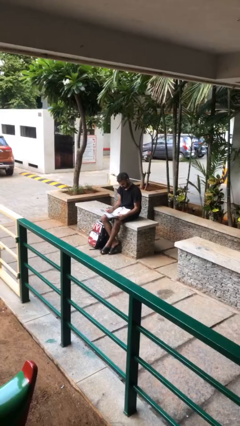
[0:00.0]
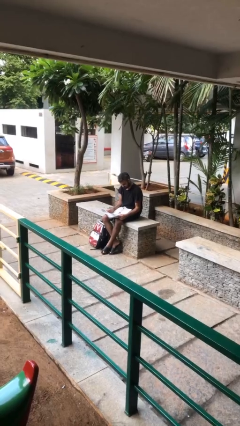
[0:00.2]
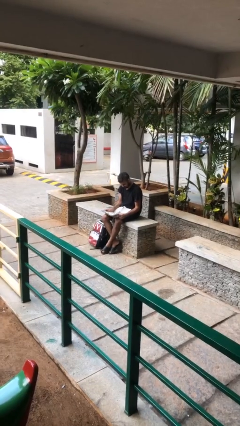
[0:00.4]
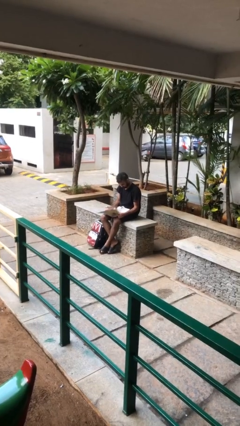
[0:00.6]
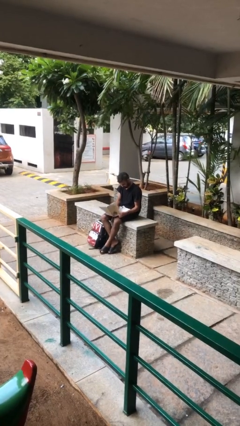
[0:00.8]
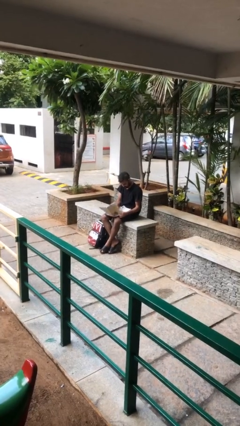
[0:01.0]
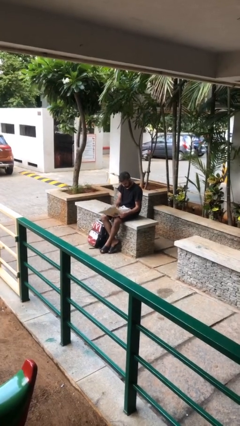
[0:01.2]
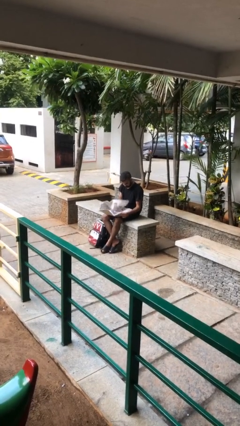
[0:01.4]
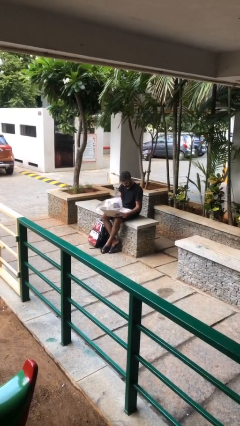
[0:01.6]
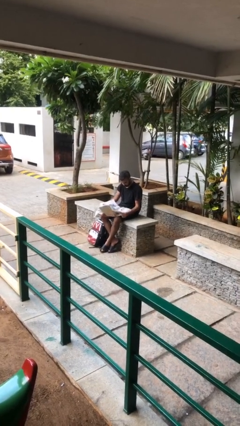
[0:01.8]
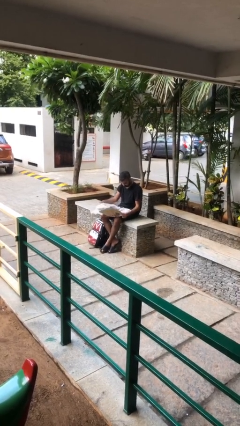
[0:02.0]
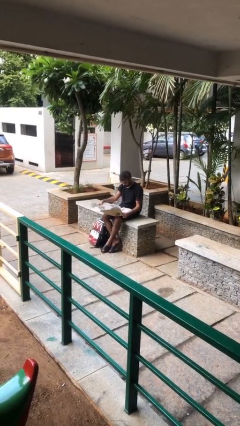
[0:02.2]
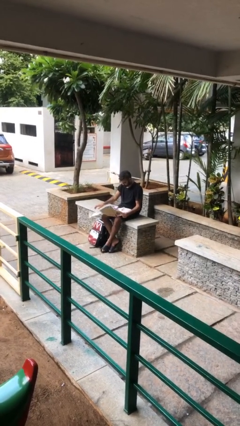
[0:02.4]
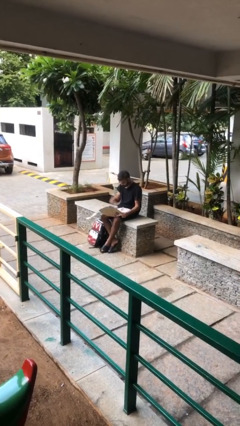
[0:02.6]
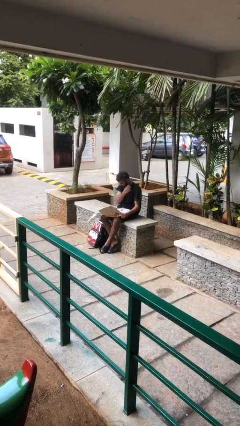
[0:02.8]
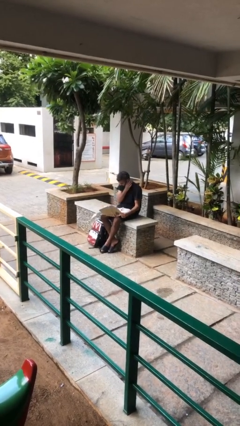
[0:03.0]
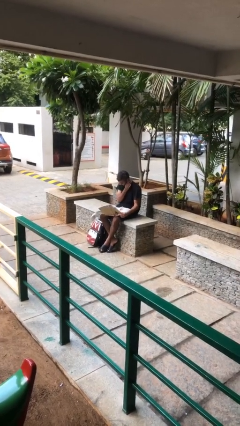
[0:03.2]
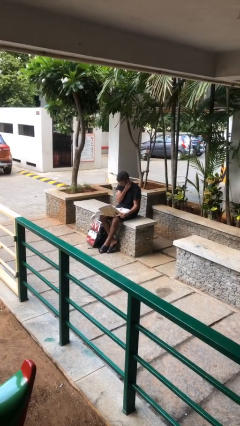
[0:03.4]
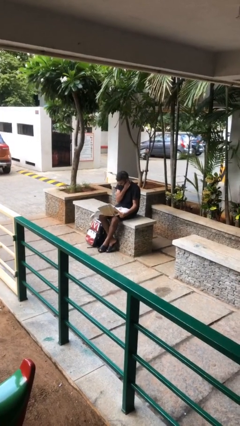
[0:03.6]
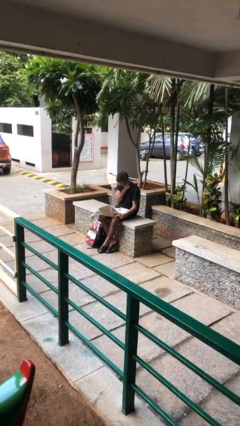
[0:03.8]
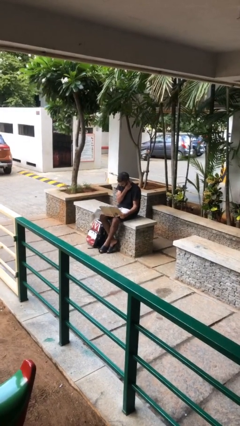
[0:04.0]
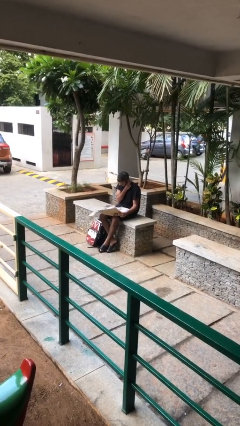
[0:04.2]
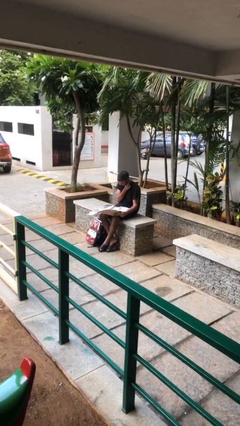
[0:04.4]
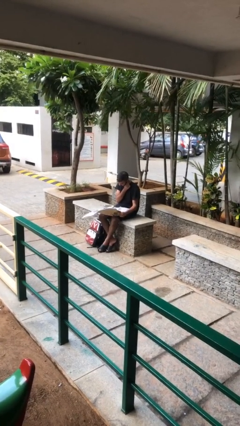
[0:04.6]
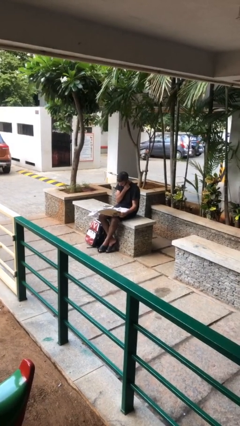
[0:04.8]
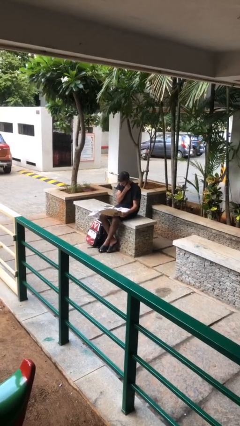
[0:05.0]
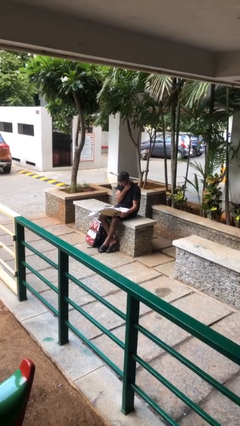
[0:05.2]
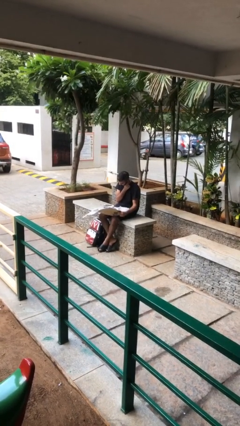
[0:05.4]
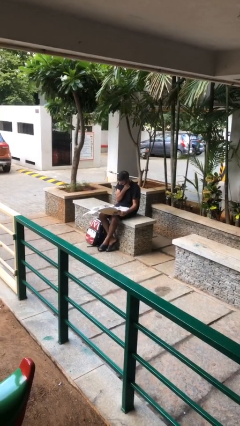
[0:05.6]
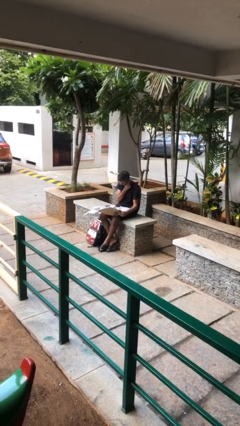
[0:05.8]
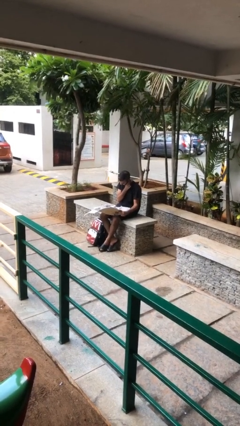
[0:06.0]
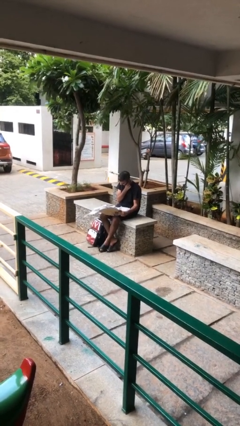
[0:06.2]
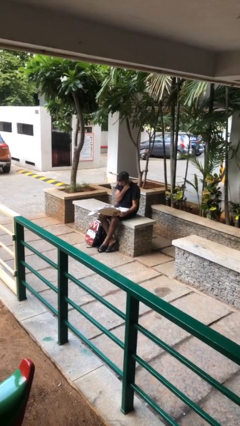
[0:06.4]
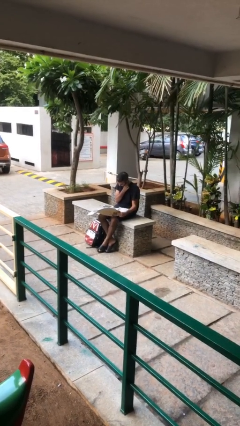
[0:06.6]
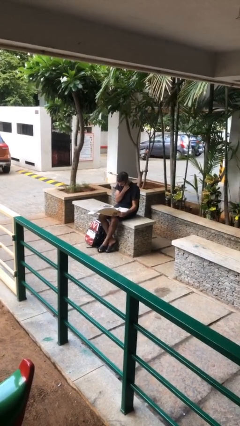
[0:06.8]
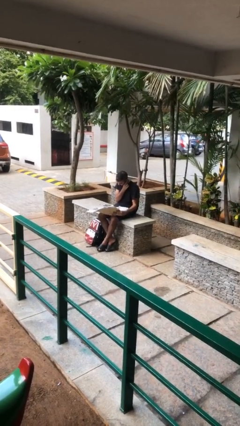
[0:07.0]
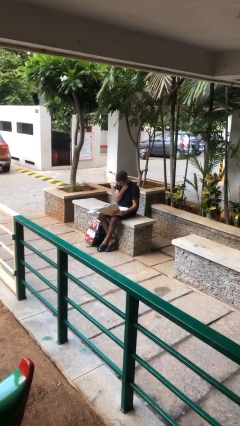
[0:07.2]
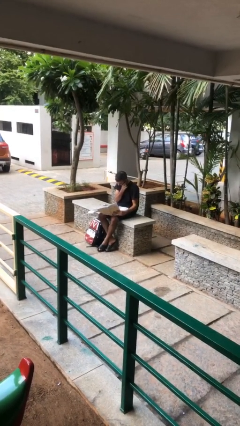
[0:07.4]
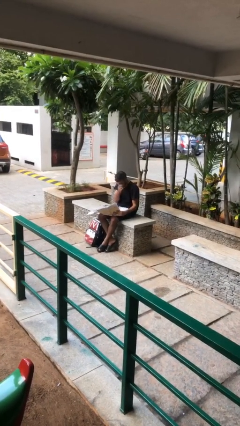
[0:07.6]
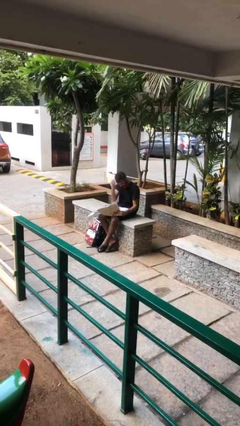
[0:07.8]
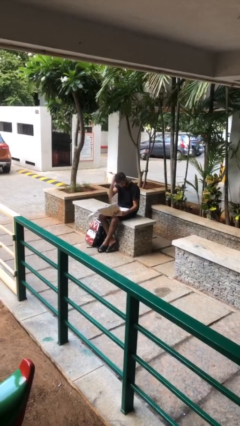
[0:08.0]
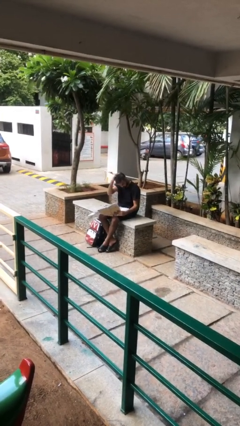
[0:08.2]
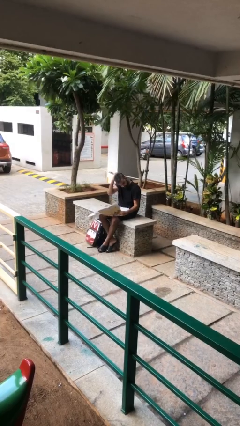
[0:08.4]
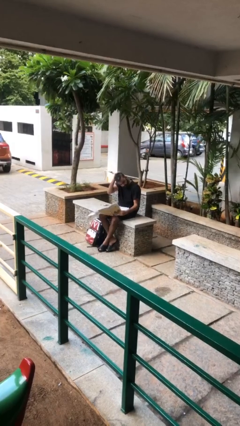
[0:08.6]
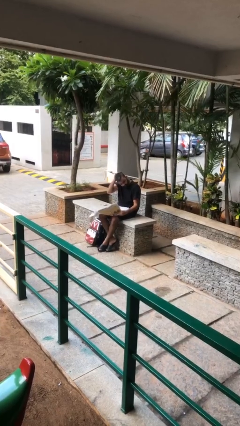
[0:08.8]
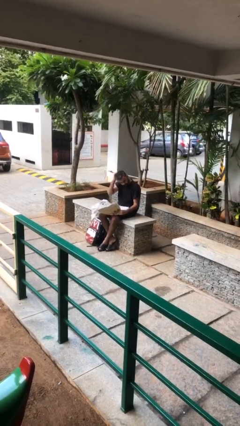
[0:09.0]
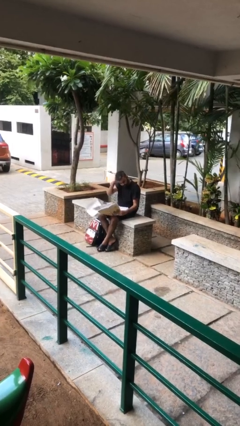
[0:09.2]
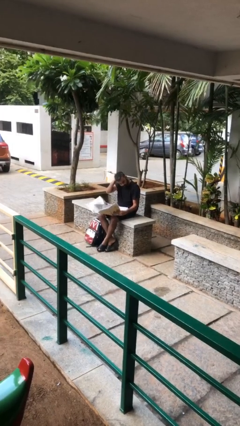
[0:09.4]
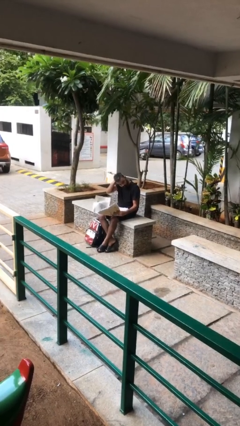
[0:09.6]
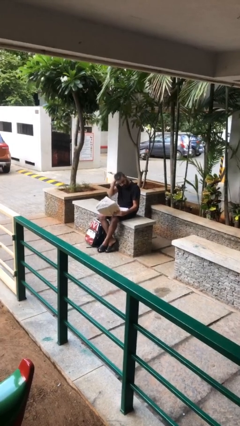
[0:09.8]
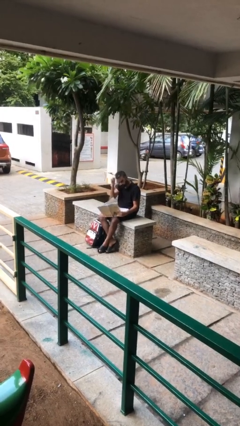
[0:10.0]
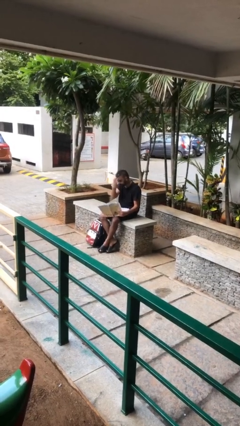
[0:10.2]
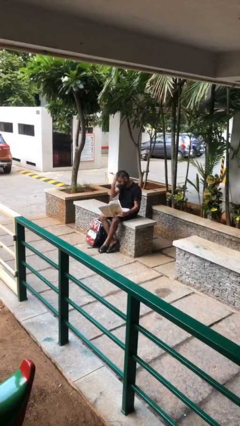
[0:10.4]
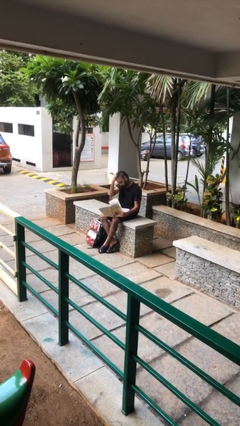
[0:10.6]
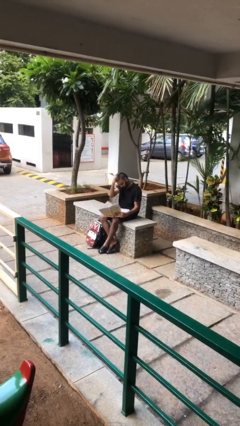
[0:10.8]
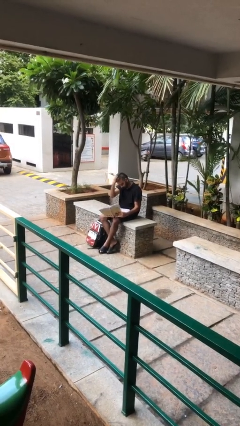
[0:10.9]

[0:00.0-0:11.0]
person reads document

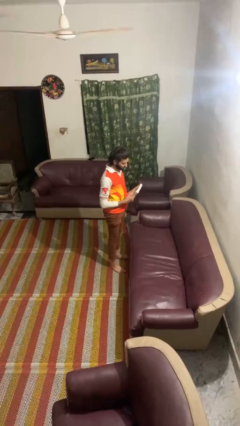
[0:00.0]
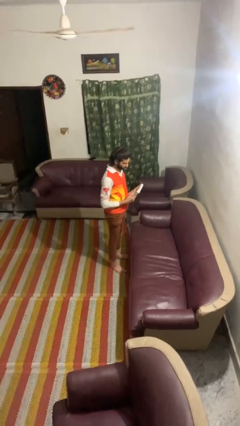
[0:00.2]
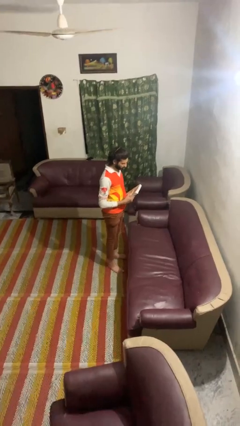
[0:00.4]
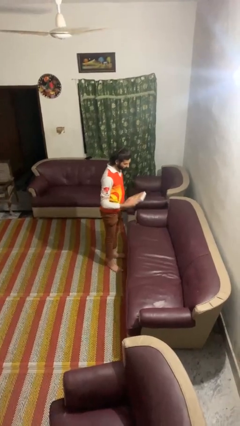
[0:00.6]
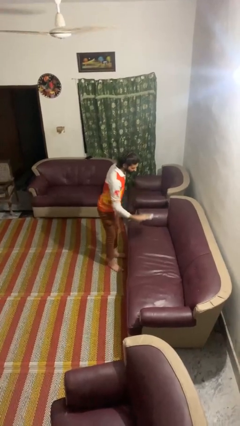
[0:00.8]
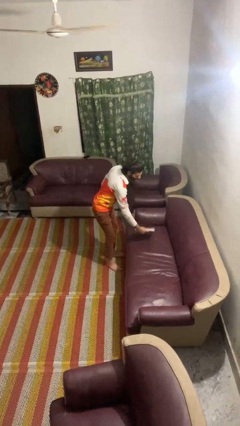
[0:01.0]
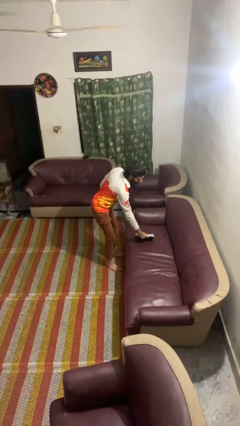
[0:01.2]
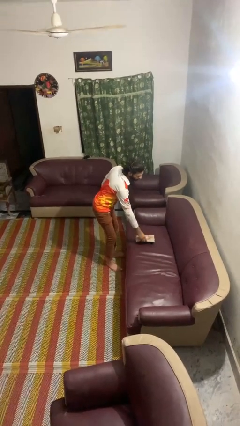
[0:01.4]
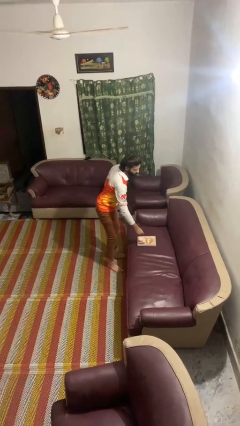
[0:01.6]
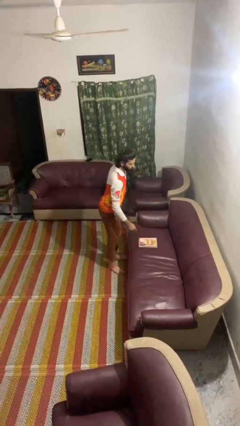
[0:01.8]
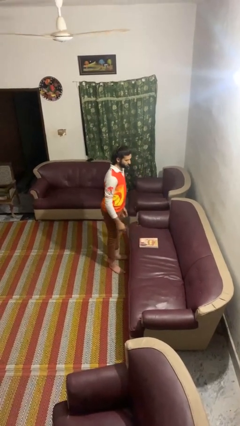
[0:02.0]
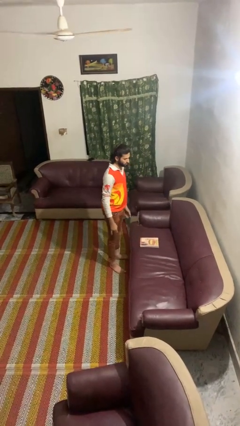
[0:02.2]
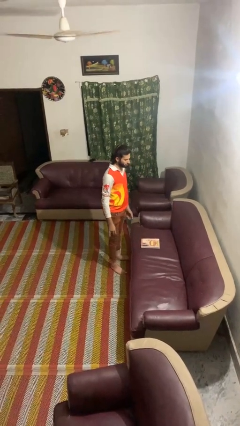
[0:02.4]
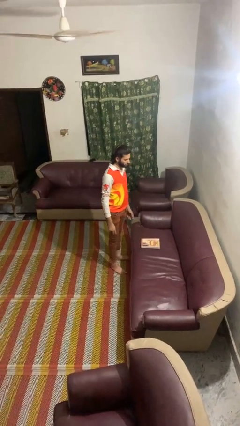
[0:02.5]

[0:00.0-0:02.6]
person puts down object on couch

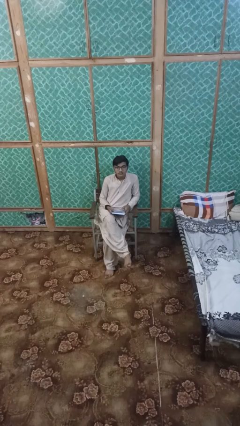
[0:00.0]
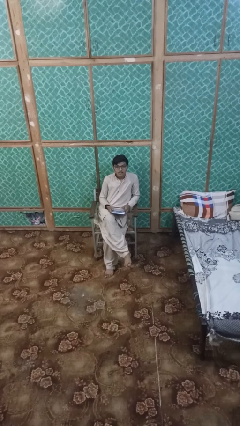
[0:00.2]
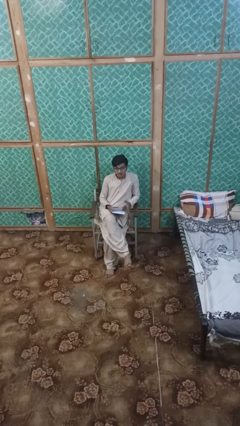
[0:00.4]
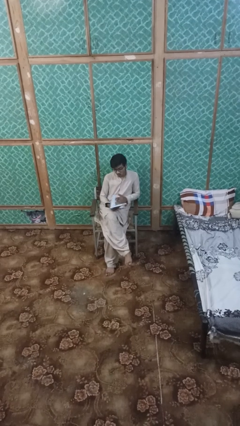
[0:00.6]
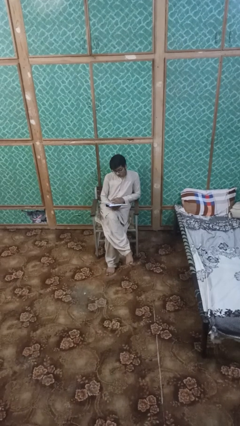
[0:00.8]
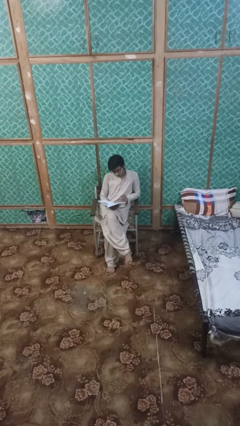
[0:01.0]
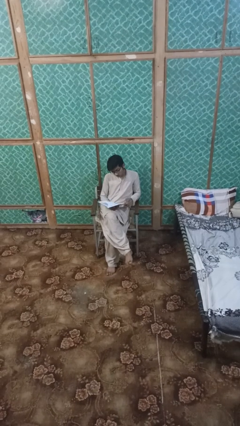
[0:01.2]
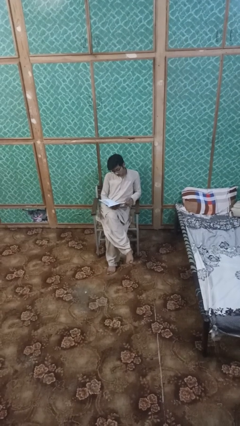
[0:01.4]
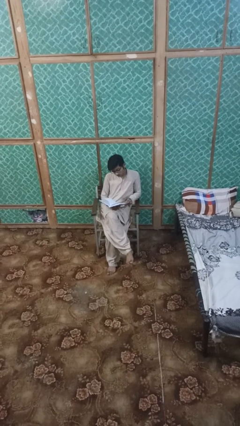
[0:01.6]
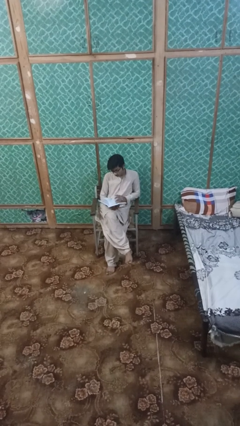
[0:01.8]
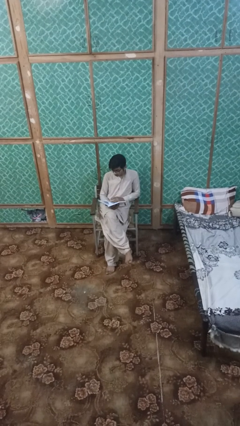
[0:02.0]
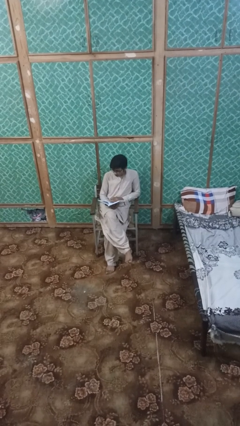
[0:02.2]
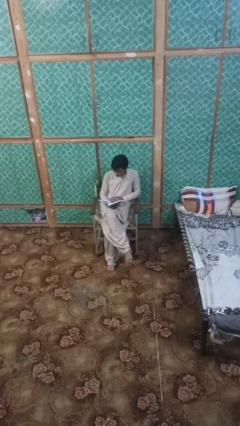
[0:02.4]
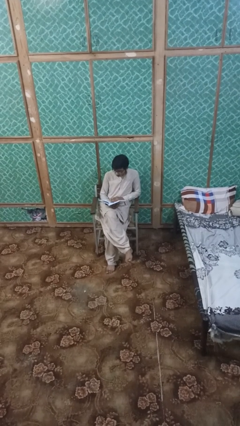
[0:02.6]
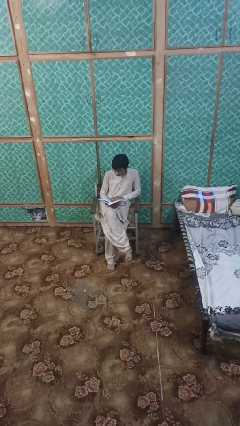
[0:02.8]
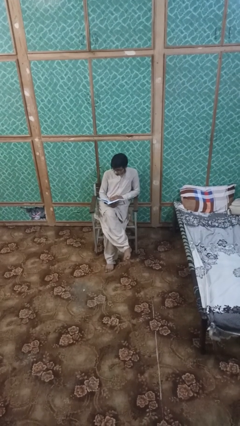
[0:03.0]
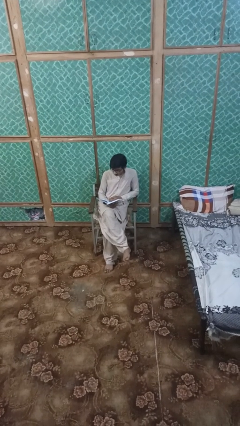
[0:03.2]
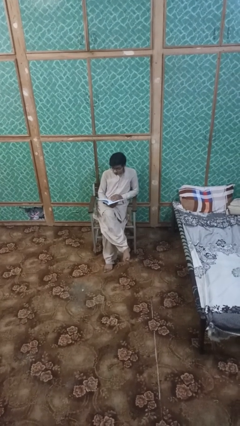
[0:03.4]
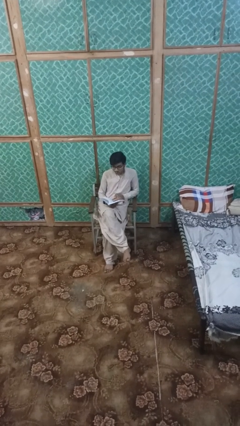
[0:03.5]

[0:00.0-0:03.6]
person reads magazine

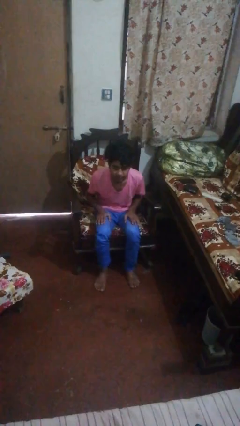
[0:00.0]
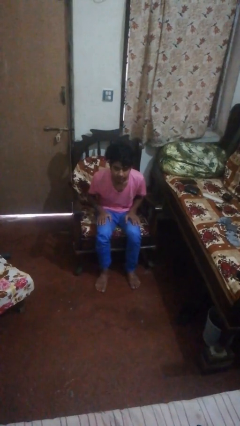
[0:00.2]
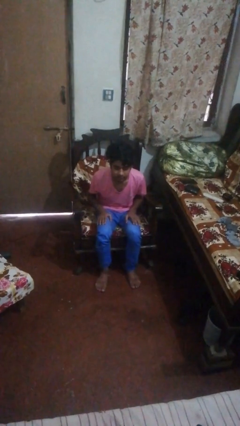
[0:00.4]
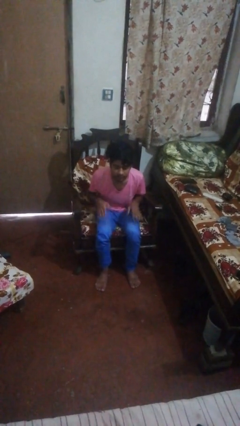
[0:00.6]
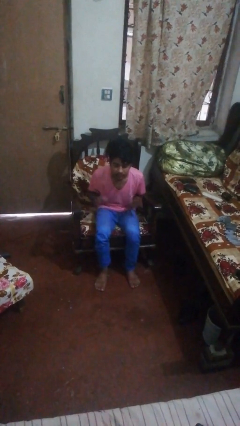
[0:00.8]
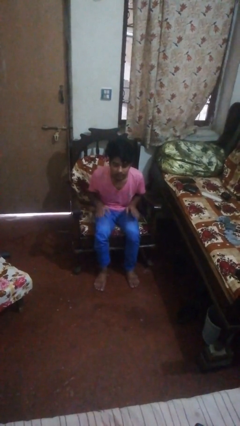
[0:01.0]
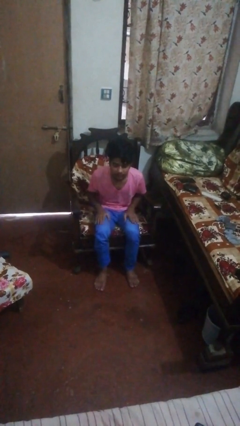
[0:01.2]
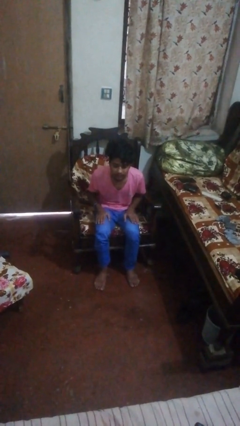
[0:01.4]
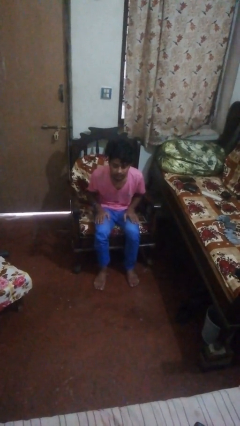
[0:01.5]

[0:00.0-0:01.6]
person slaps hands on thighs
